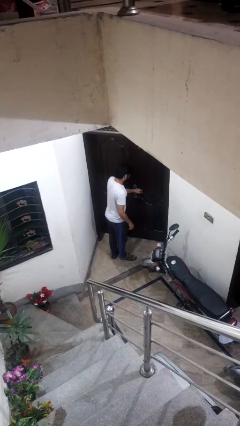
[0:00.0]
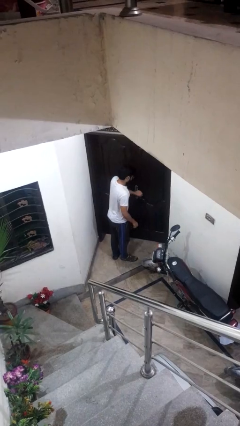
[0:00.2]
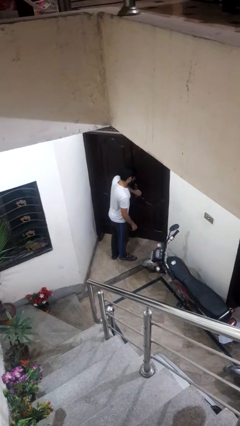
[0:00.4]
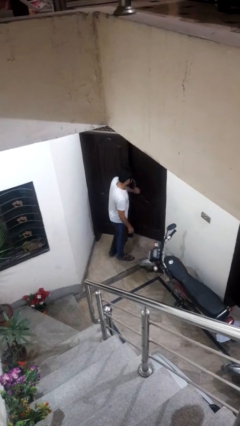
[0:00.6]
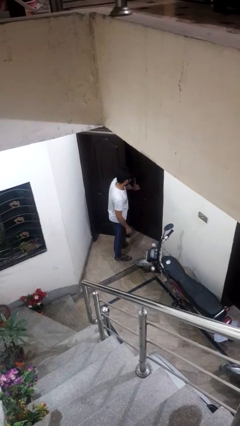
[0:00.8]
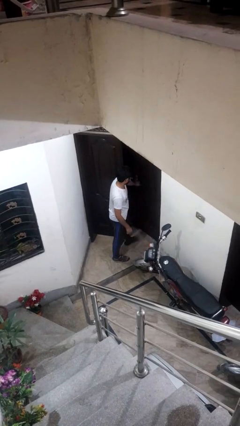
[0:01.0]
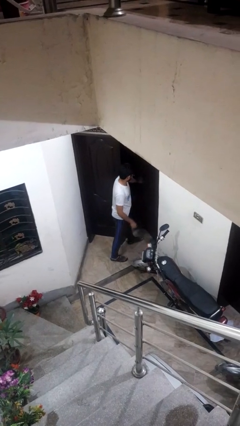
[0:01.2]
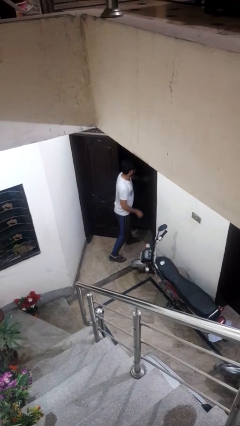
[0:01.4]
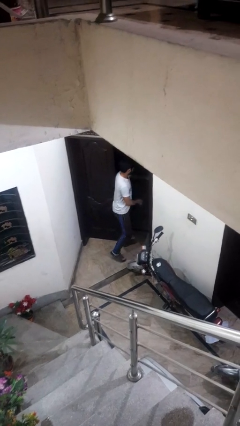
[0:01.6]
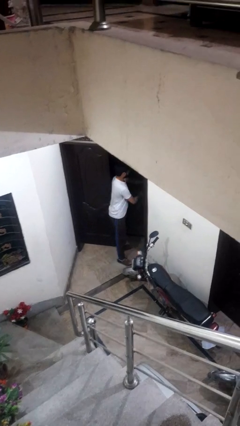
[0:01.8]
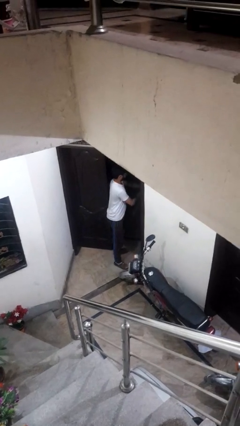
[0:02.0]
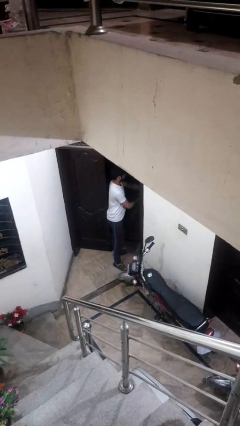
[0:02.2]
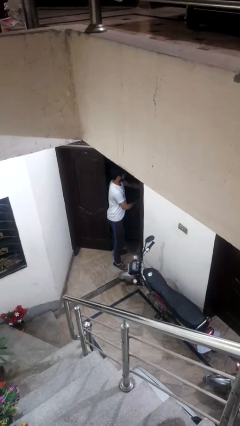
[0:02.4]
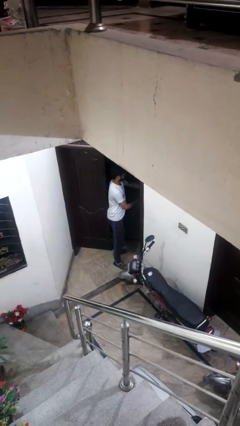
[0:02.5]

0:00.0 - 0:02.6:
person opens facility door

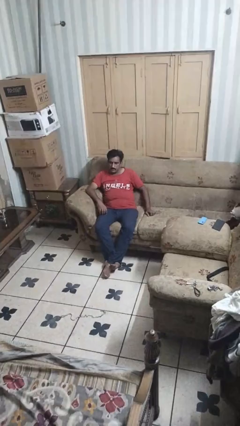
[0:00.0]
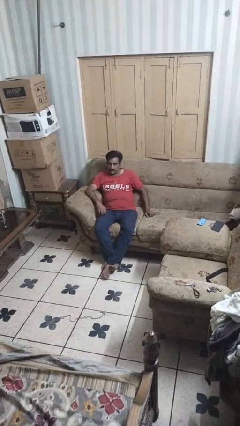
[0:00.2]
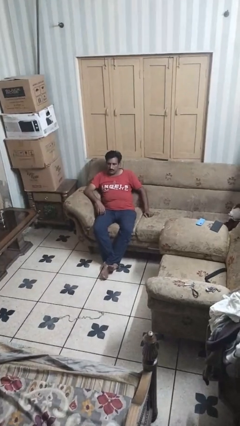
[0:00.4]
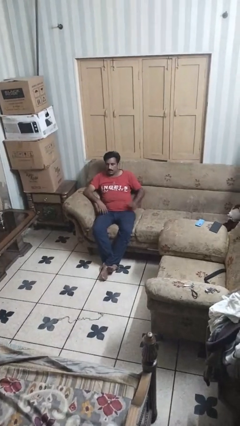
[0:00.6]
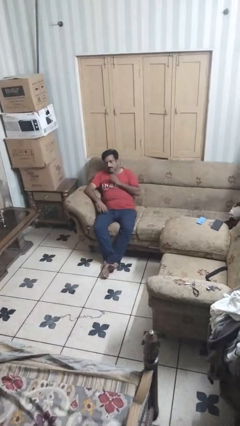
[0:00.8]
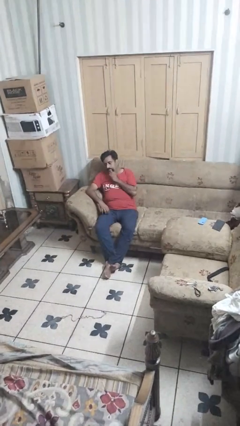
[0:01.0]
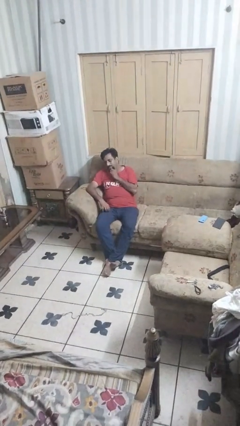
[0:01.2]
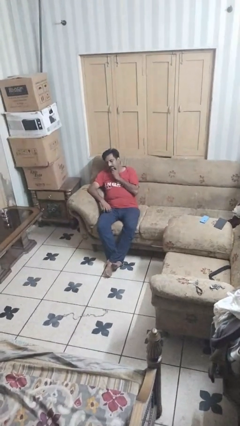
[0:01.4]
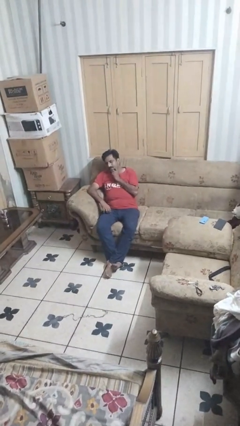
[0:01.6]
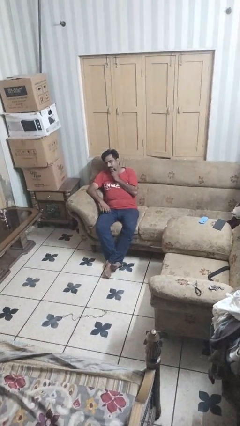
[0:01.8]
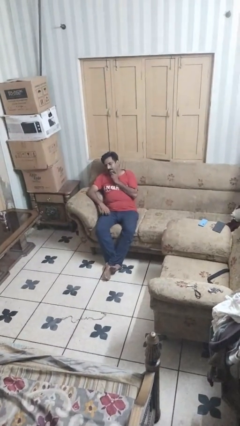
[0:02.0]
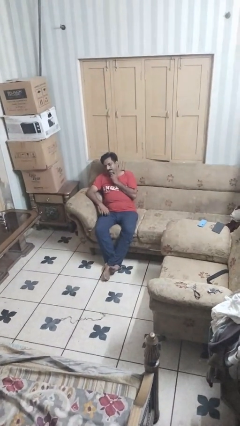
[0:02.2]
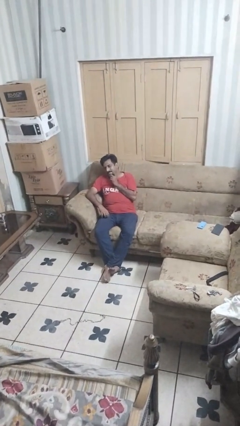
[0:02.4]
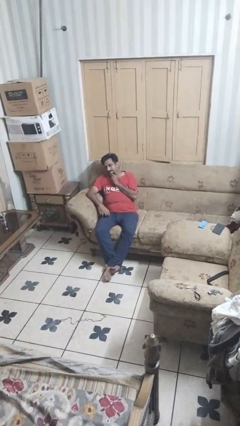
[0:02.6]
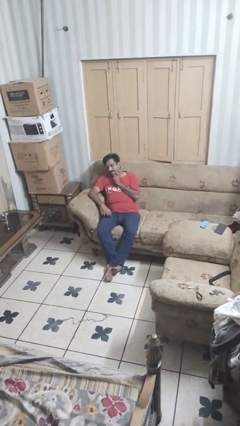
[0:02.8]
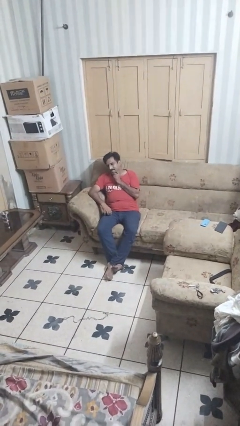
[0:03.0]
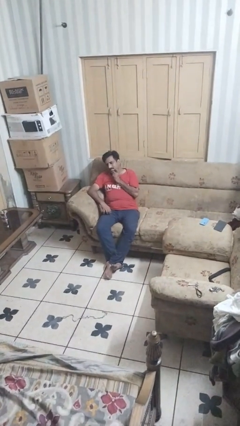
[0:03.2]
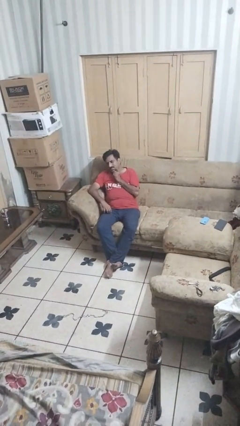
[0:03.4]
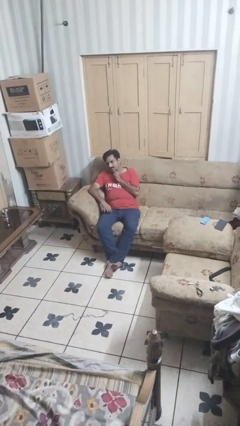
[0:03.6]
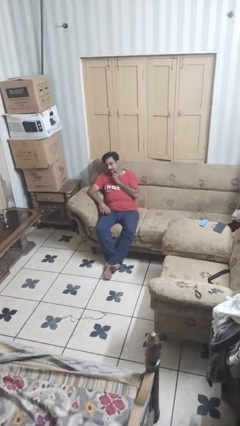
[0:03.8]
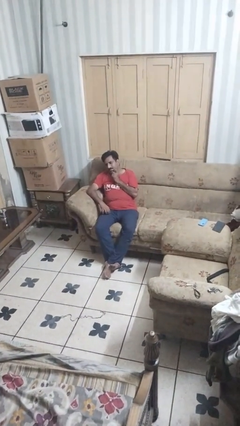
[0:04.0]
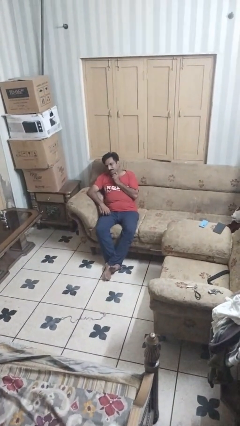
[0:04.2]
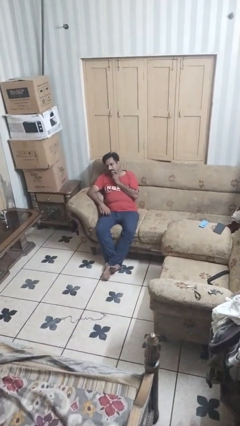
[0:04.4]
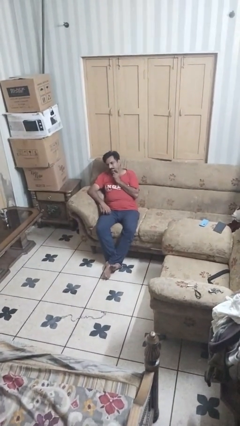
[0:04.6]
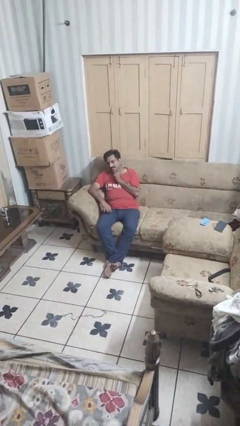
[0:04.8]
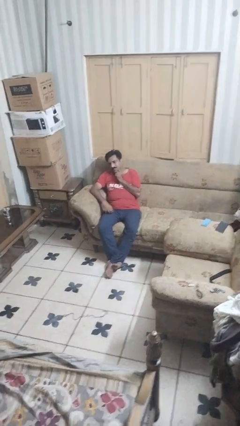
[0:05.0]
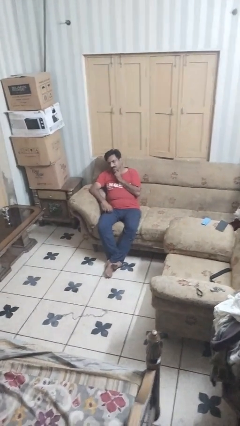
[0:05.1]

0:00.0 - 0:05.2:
person strokes chin

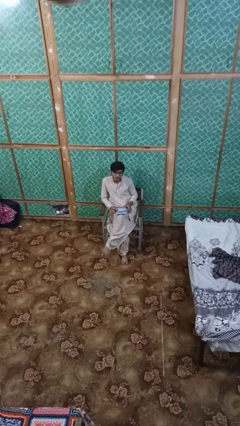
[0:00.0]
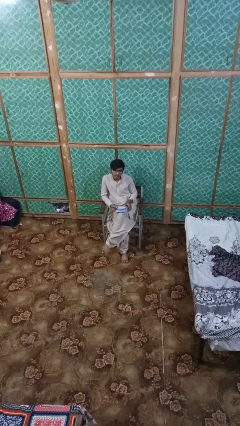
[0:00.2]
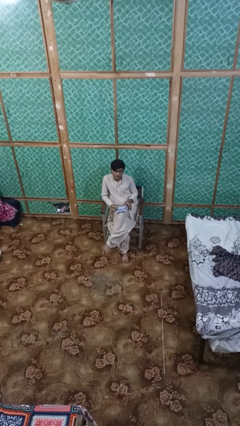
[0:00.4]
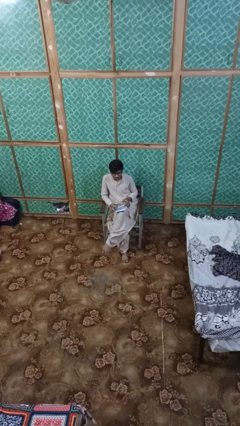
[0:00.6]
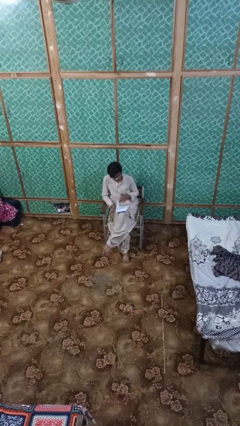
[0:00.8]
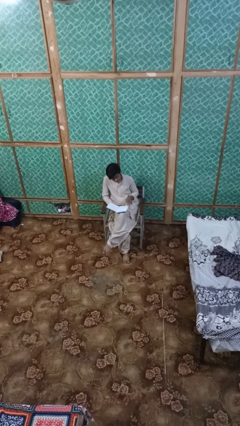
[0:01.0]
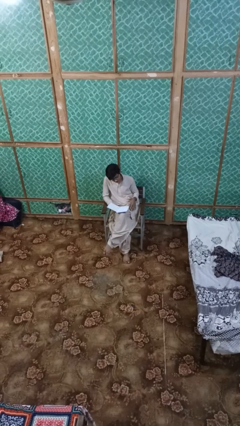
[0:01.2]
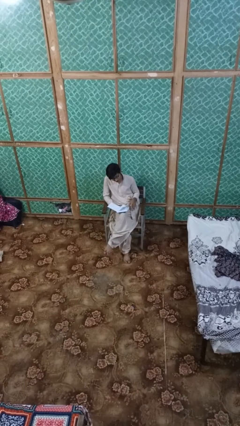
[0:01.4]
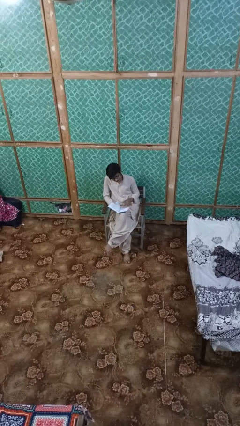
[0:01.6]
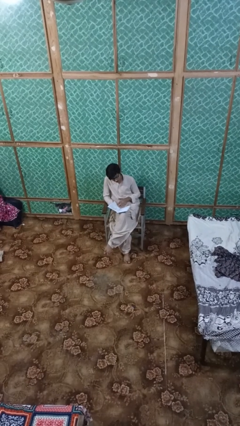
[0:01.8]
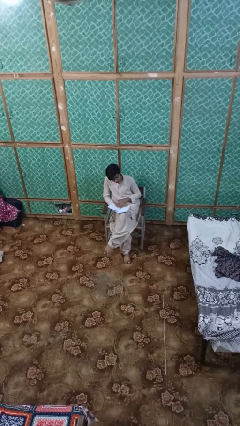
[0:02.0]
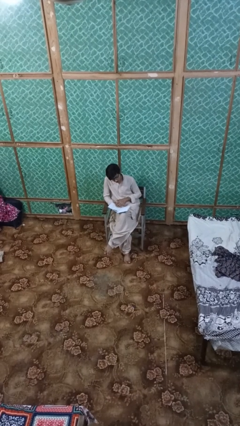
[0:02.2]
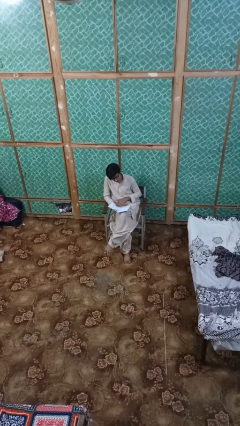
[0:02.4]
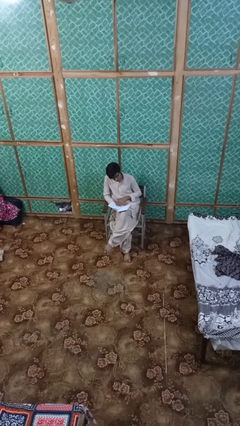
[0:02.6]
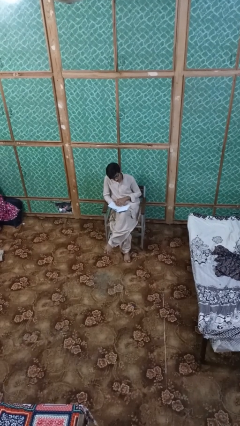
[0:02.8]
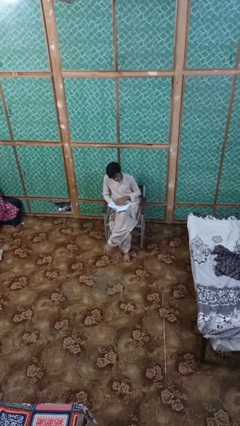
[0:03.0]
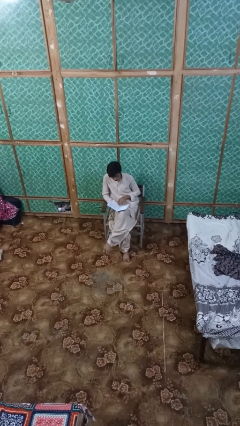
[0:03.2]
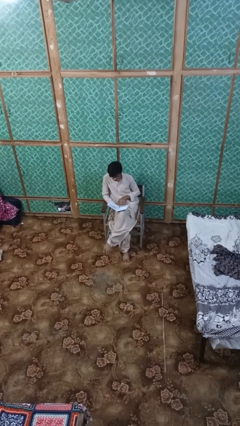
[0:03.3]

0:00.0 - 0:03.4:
person reads magazine

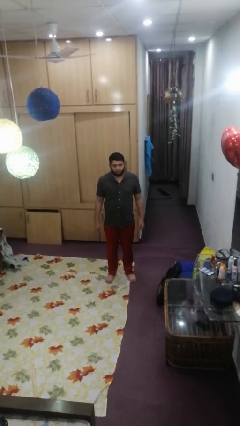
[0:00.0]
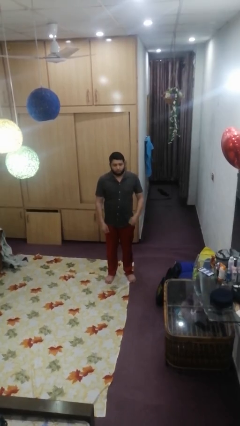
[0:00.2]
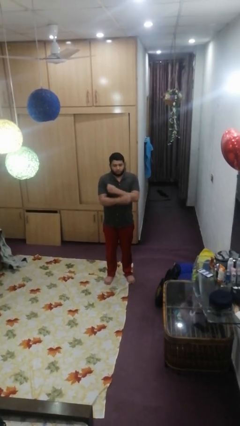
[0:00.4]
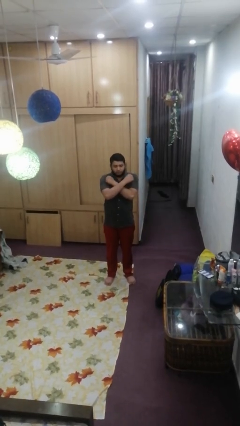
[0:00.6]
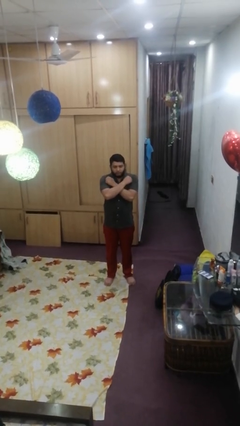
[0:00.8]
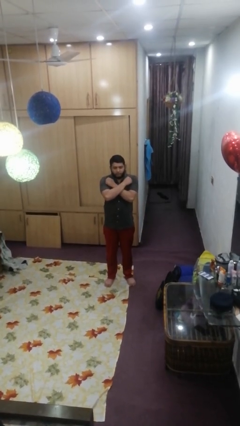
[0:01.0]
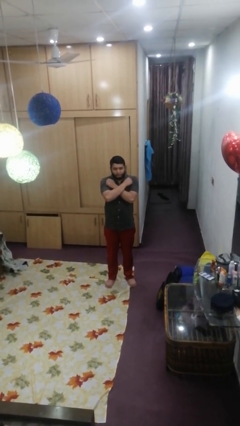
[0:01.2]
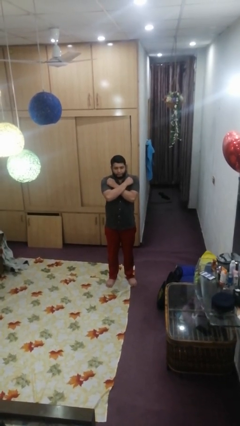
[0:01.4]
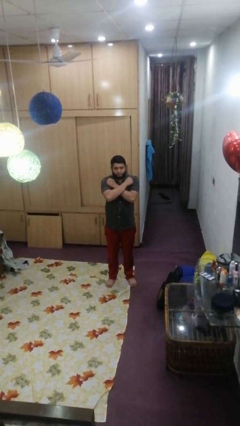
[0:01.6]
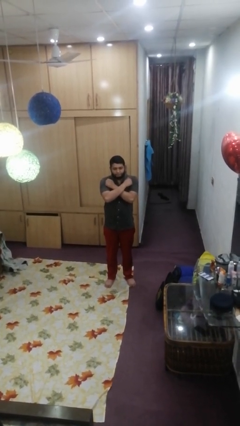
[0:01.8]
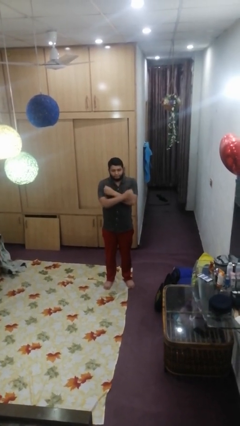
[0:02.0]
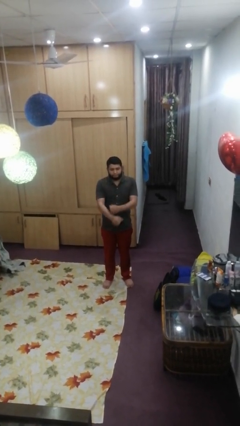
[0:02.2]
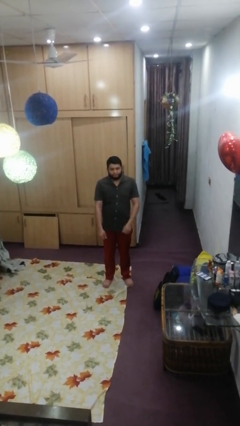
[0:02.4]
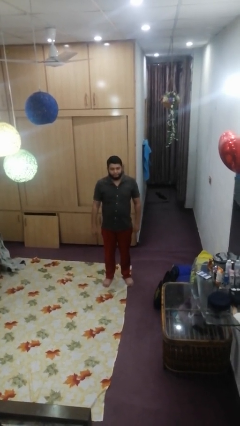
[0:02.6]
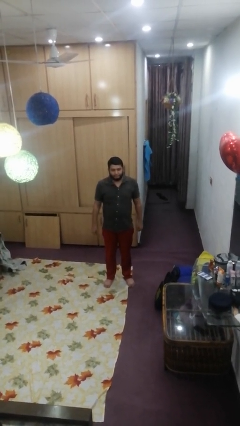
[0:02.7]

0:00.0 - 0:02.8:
person crosses arms

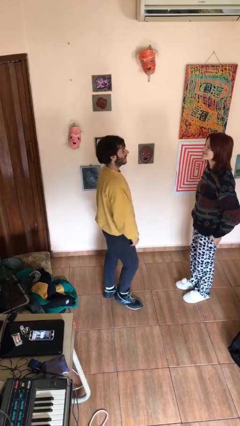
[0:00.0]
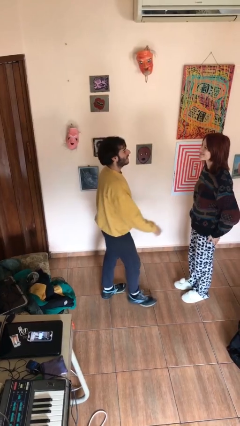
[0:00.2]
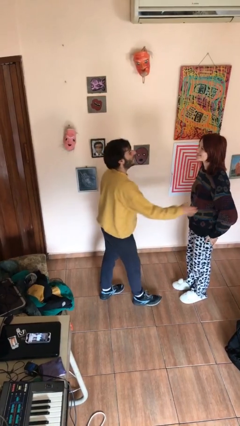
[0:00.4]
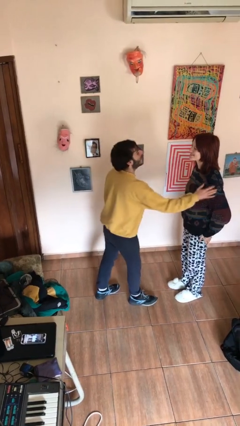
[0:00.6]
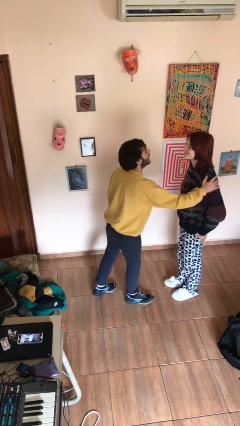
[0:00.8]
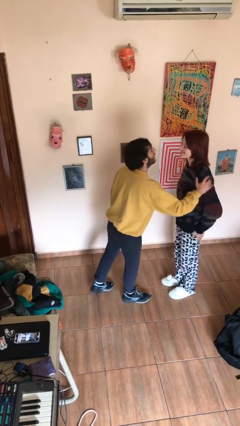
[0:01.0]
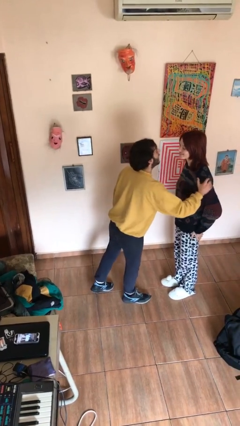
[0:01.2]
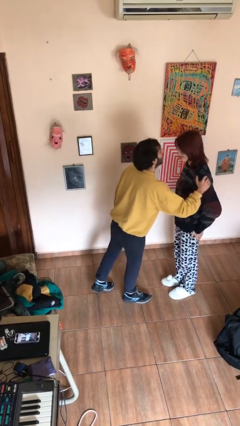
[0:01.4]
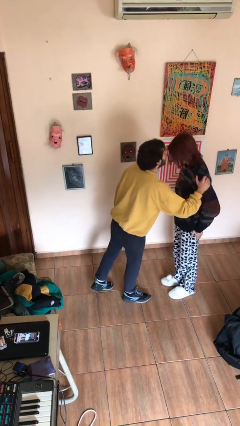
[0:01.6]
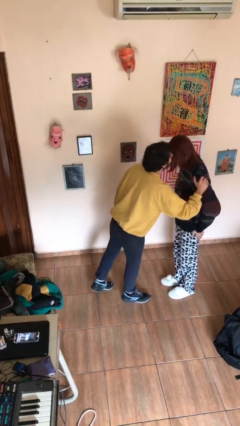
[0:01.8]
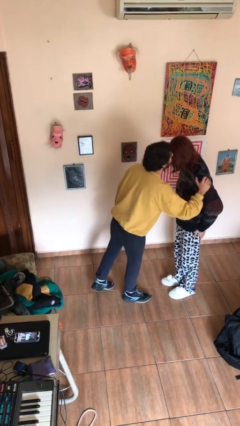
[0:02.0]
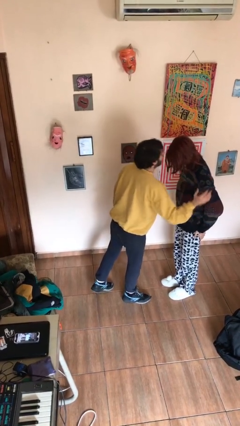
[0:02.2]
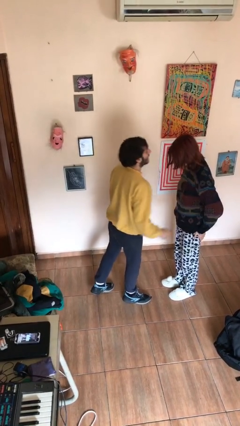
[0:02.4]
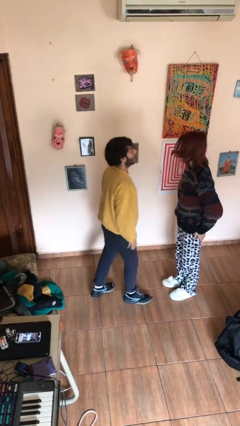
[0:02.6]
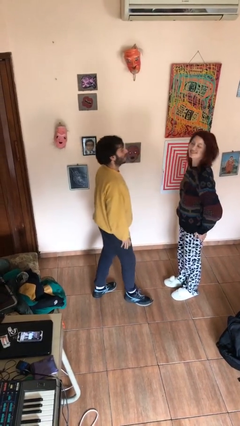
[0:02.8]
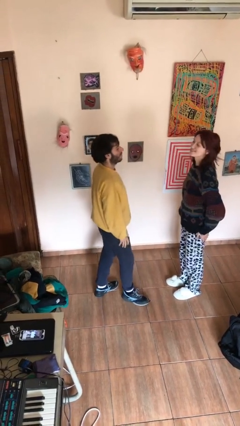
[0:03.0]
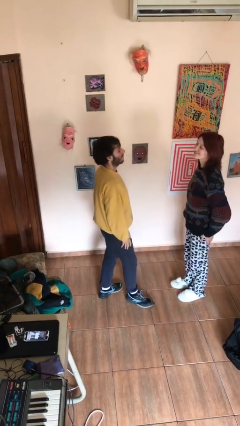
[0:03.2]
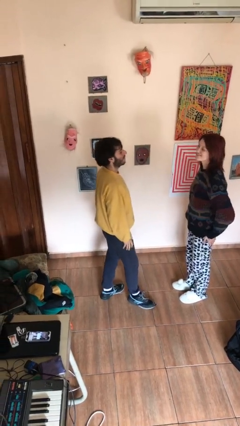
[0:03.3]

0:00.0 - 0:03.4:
person pounds shoulders of person
